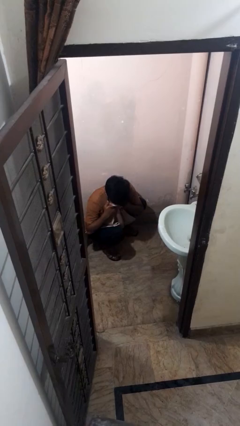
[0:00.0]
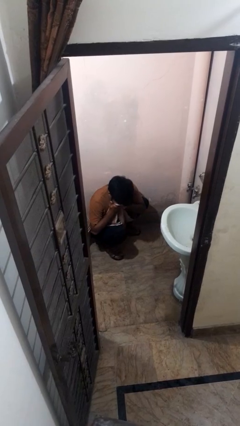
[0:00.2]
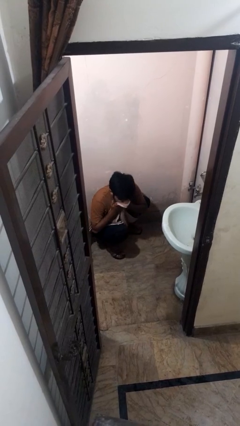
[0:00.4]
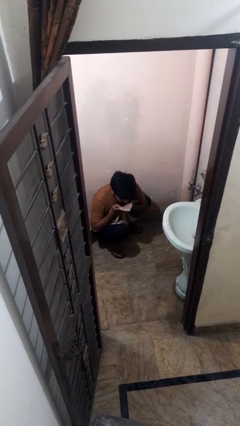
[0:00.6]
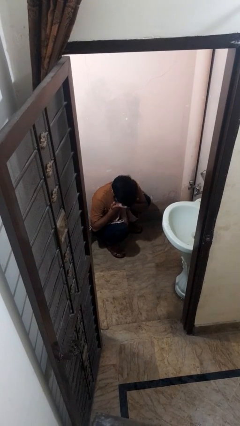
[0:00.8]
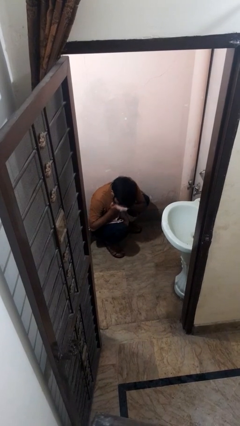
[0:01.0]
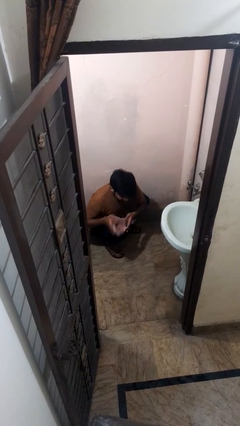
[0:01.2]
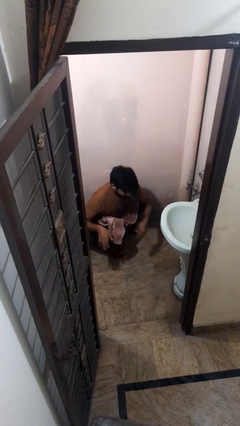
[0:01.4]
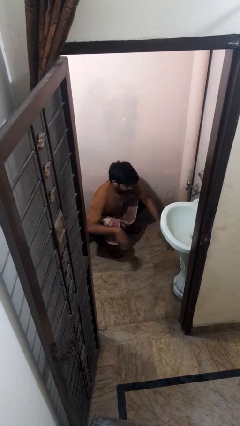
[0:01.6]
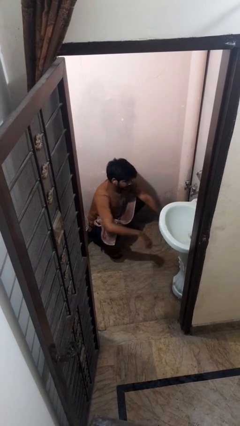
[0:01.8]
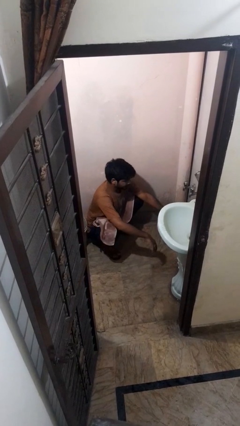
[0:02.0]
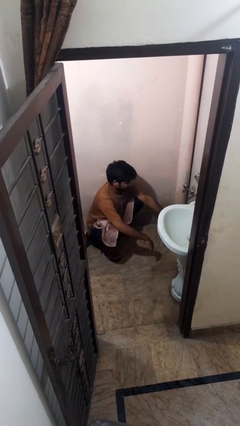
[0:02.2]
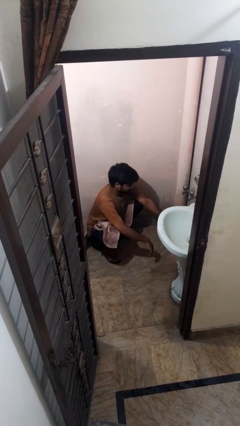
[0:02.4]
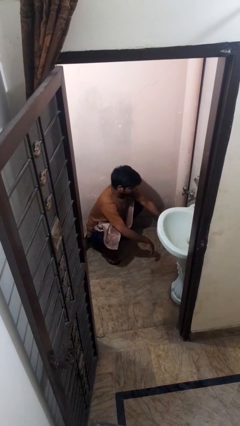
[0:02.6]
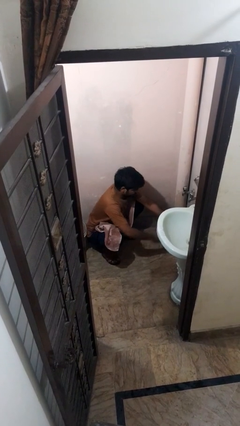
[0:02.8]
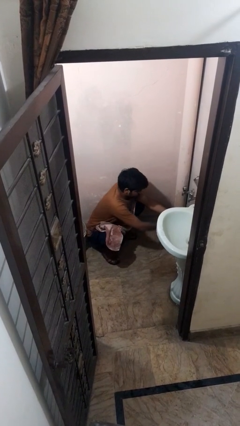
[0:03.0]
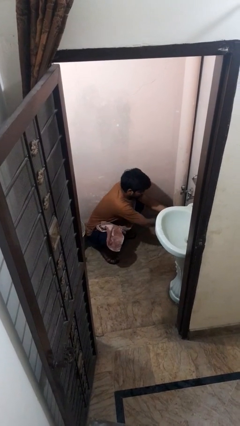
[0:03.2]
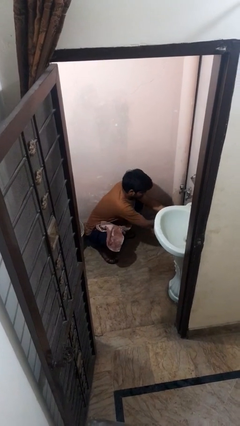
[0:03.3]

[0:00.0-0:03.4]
person picks up object from bed

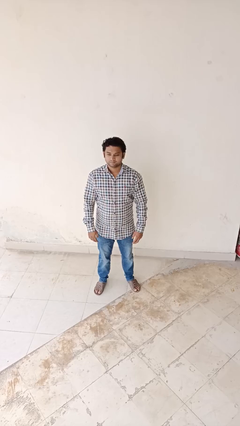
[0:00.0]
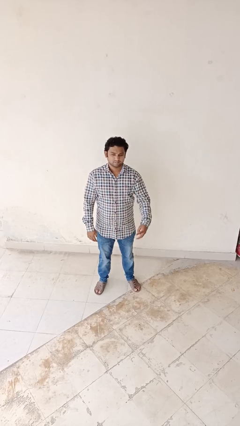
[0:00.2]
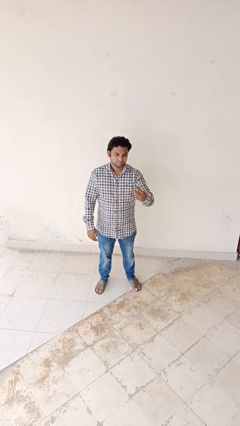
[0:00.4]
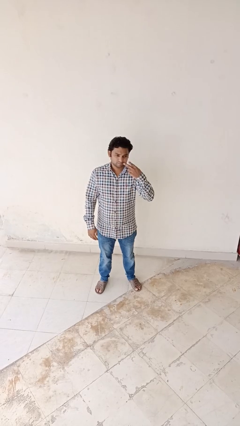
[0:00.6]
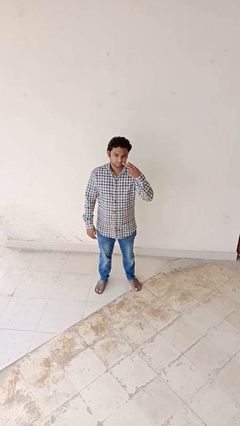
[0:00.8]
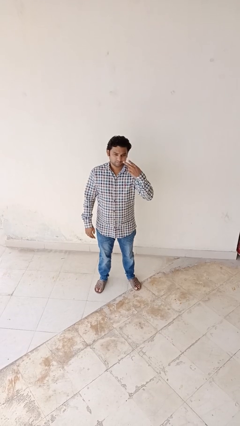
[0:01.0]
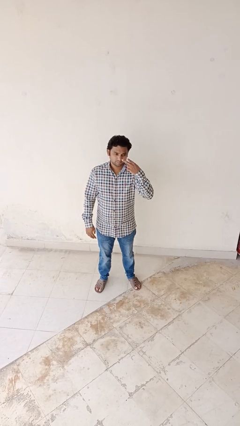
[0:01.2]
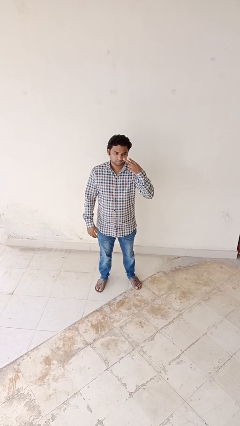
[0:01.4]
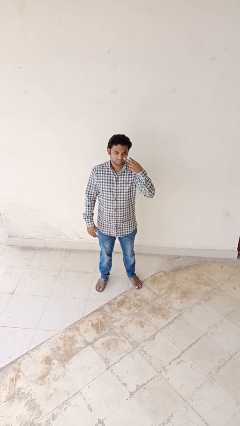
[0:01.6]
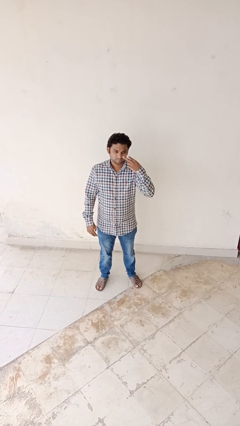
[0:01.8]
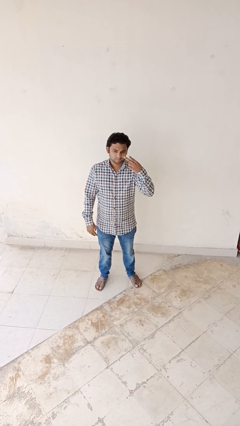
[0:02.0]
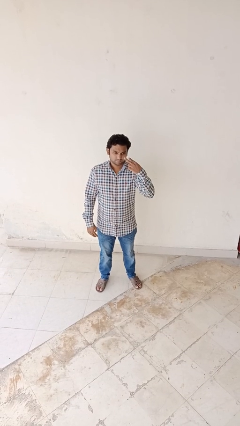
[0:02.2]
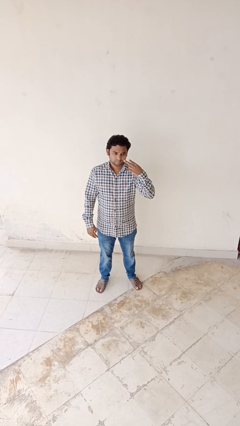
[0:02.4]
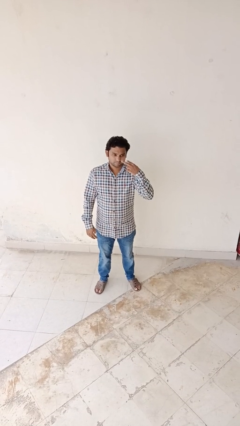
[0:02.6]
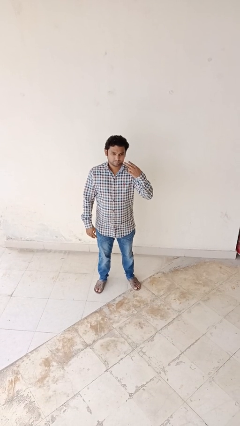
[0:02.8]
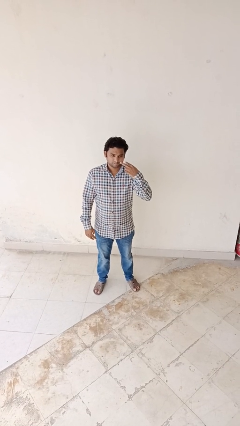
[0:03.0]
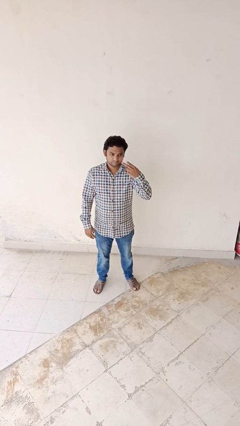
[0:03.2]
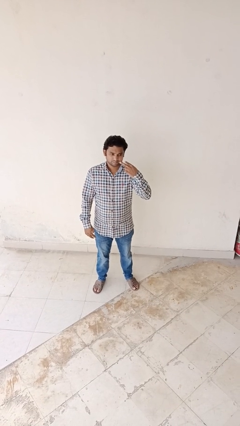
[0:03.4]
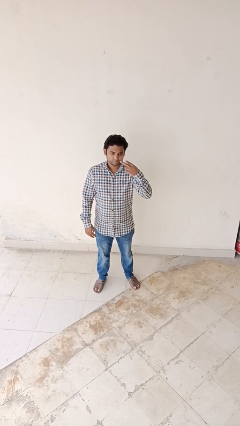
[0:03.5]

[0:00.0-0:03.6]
person gestures watch closely

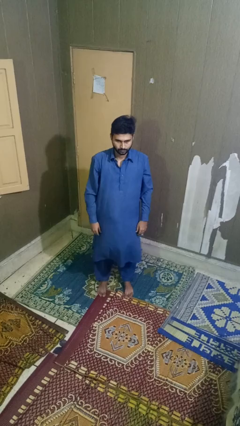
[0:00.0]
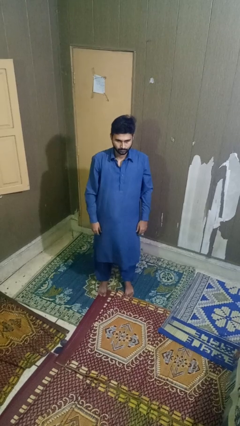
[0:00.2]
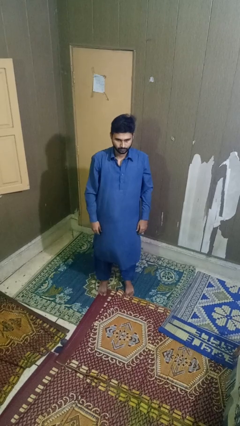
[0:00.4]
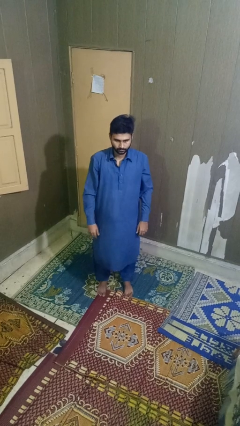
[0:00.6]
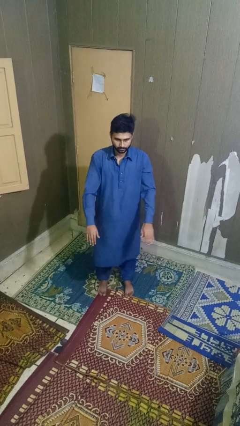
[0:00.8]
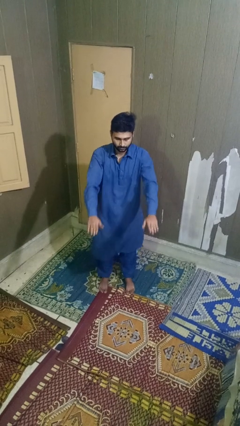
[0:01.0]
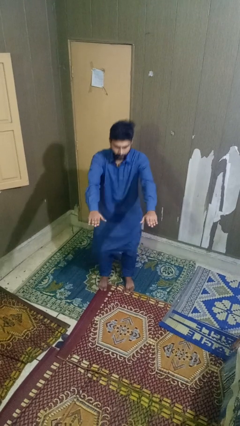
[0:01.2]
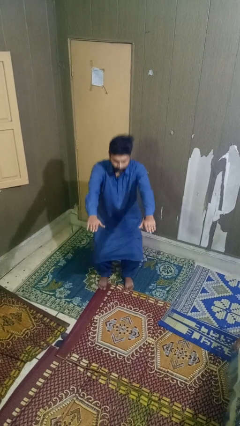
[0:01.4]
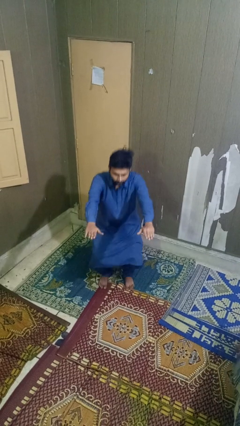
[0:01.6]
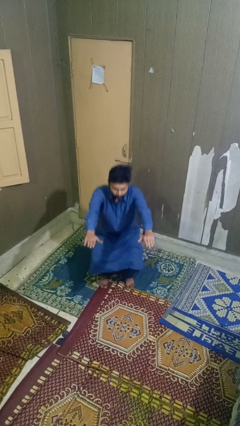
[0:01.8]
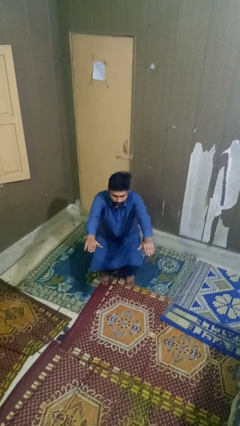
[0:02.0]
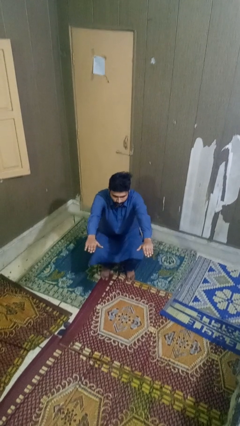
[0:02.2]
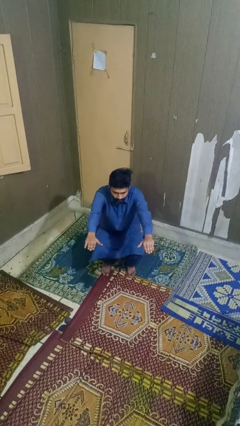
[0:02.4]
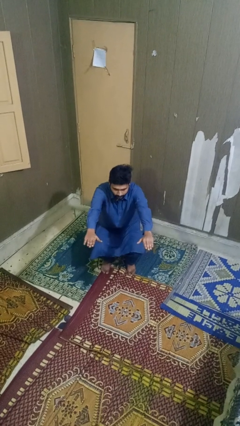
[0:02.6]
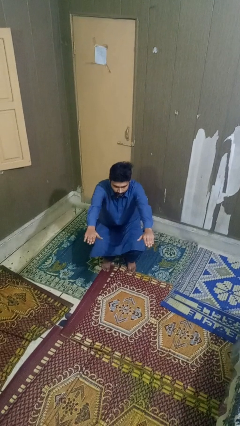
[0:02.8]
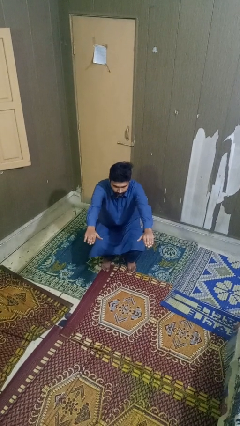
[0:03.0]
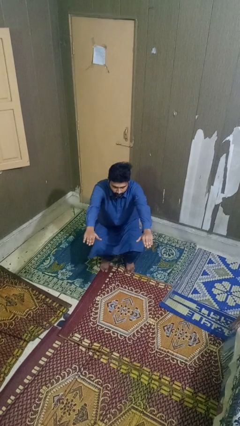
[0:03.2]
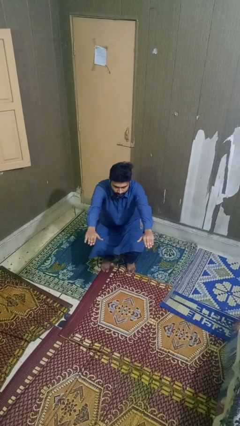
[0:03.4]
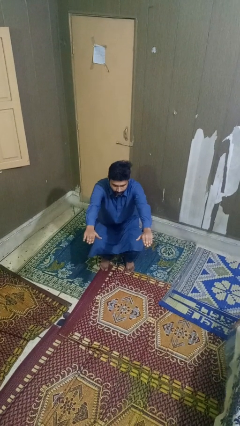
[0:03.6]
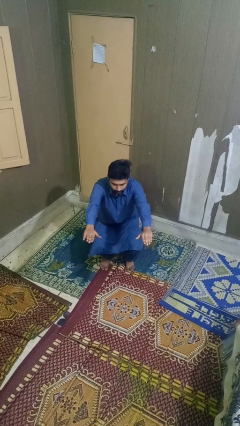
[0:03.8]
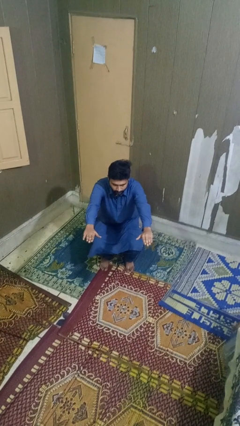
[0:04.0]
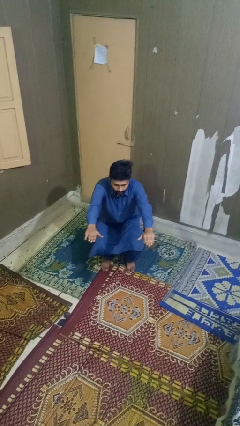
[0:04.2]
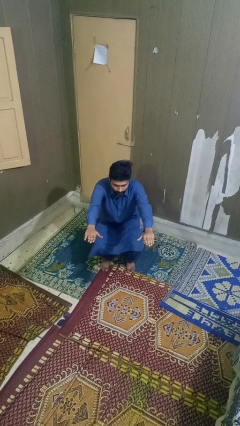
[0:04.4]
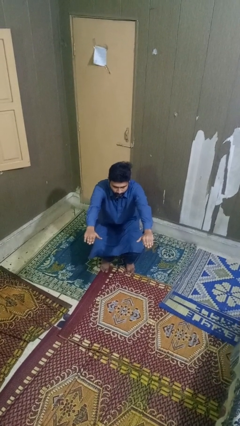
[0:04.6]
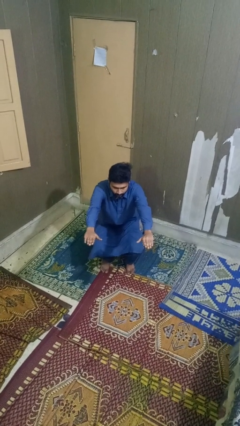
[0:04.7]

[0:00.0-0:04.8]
person squats

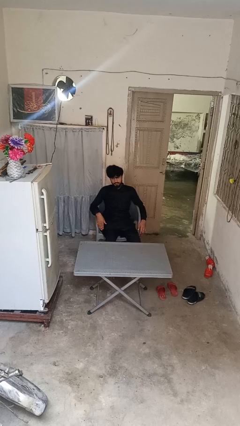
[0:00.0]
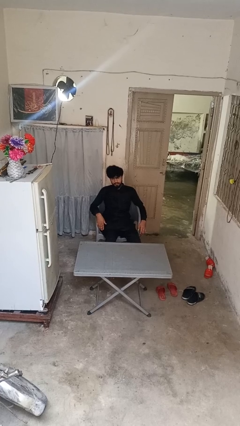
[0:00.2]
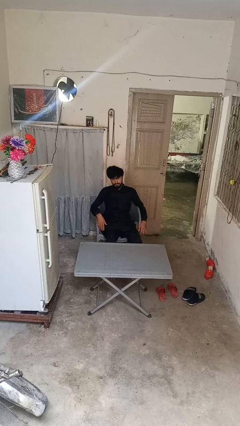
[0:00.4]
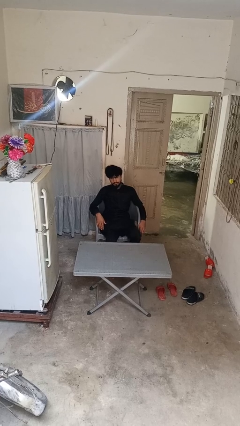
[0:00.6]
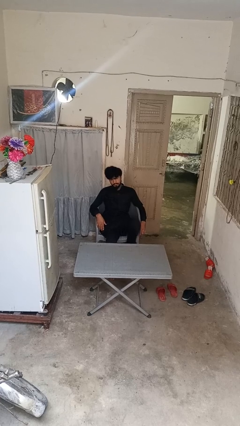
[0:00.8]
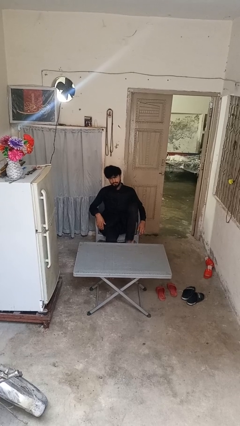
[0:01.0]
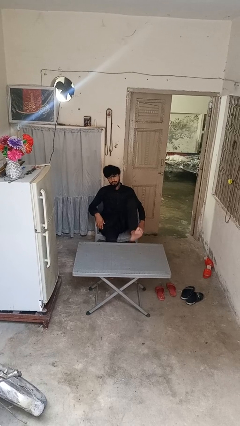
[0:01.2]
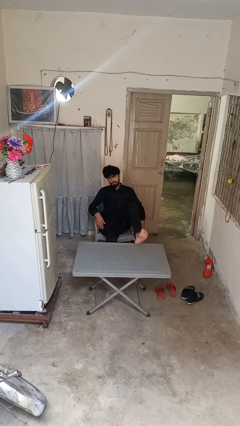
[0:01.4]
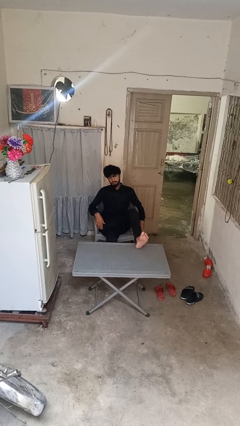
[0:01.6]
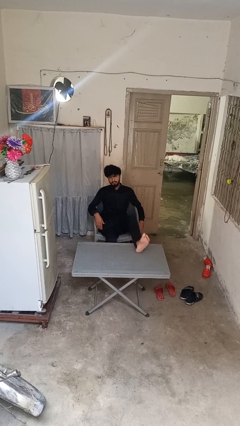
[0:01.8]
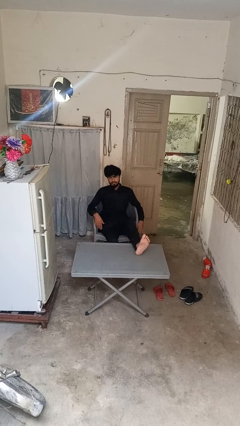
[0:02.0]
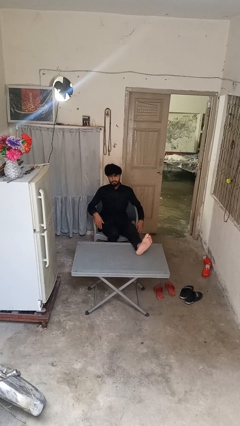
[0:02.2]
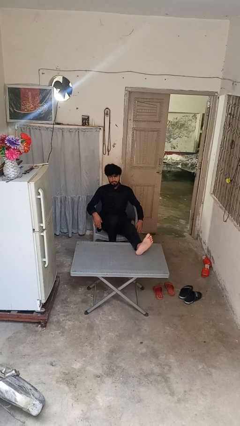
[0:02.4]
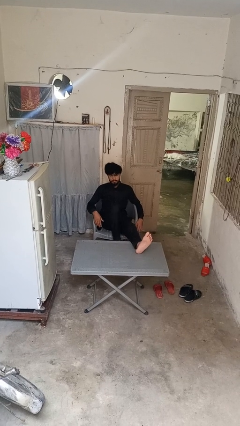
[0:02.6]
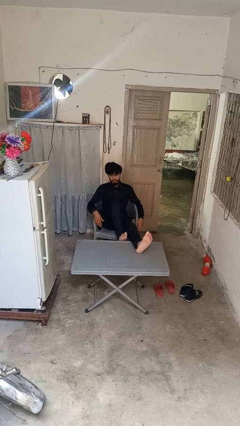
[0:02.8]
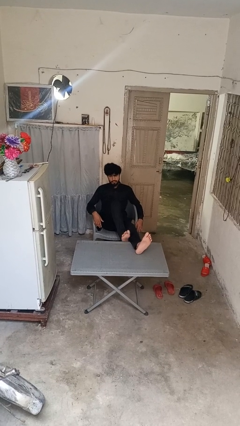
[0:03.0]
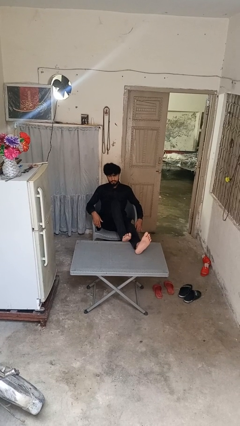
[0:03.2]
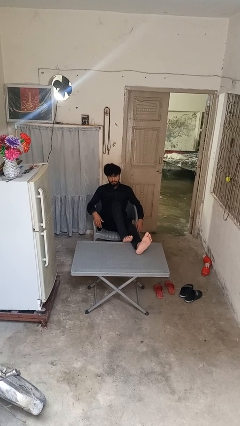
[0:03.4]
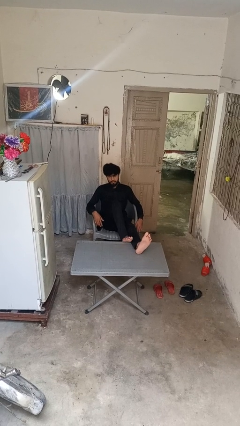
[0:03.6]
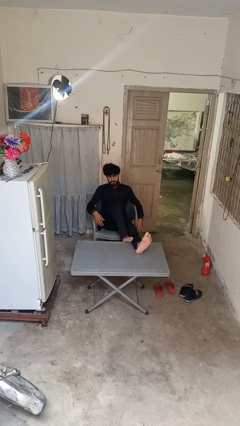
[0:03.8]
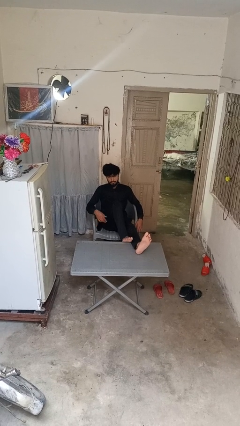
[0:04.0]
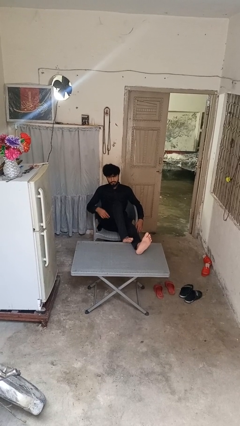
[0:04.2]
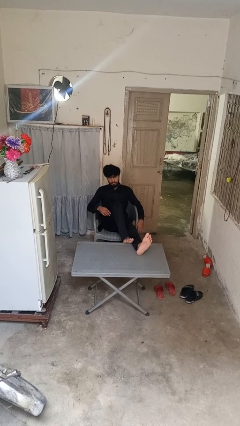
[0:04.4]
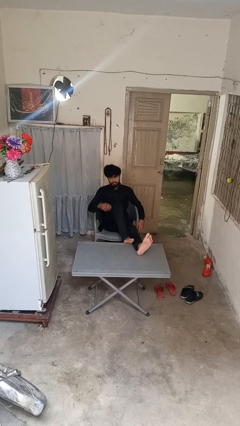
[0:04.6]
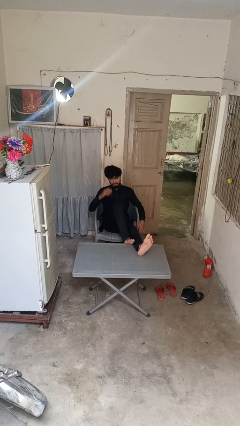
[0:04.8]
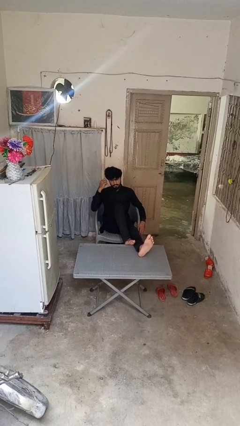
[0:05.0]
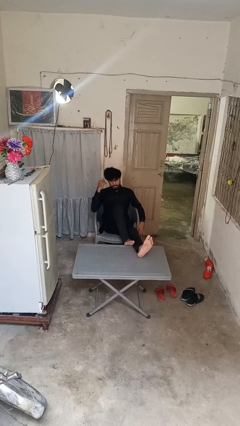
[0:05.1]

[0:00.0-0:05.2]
person puts feet up

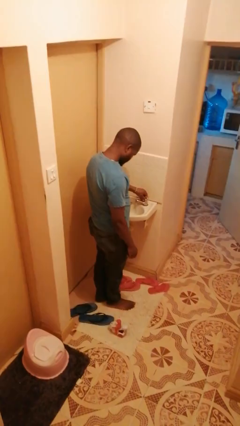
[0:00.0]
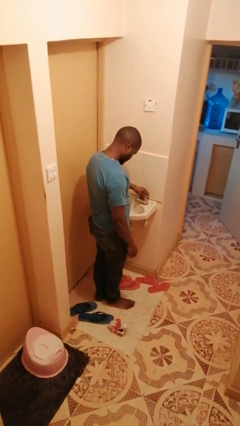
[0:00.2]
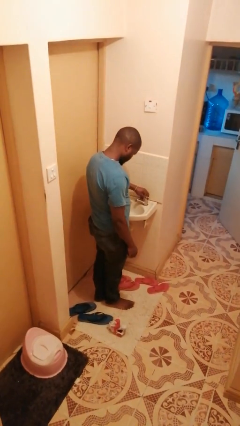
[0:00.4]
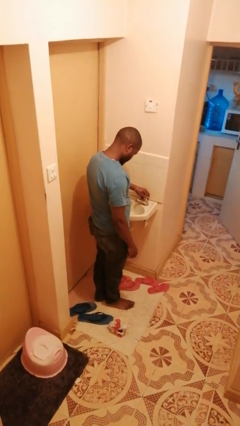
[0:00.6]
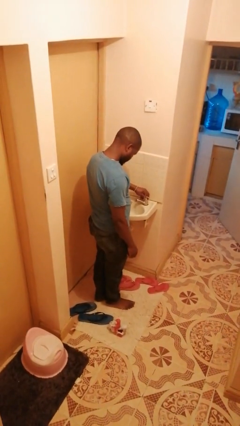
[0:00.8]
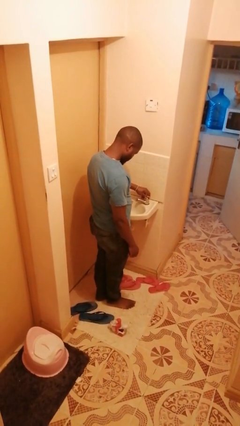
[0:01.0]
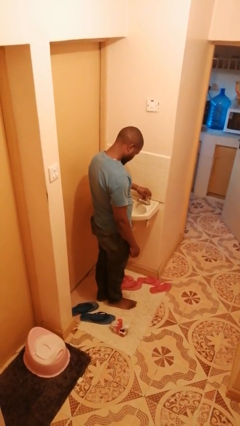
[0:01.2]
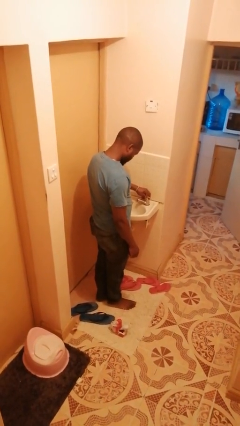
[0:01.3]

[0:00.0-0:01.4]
person turns off faucet
